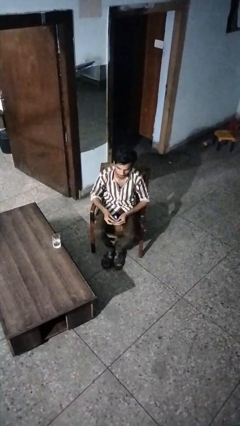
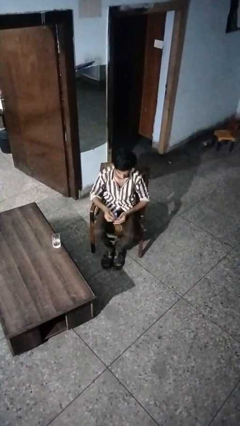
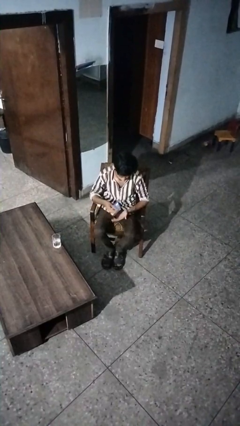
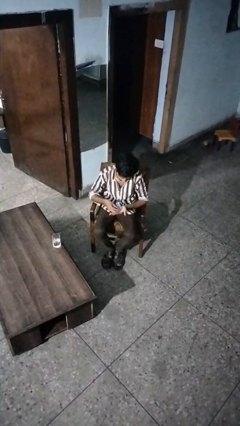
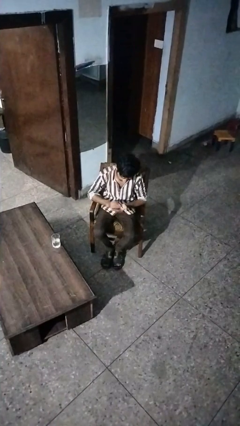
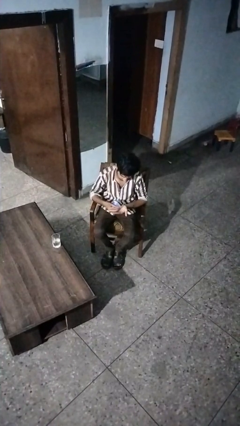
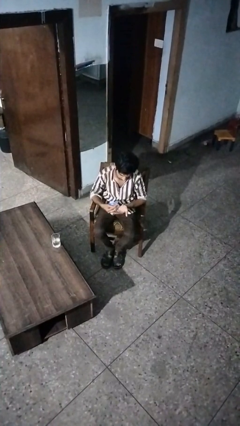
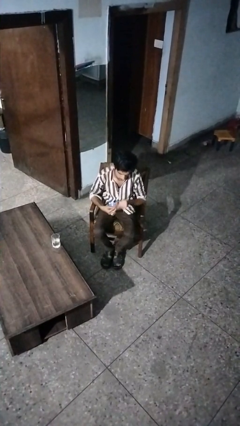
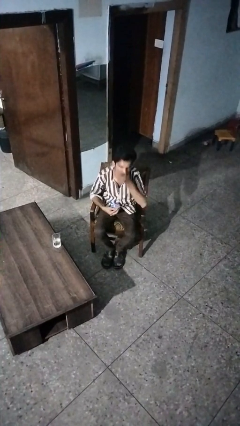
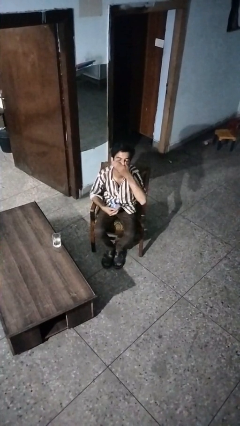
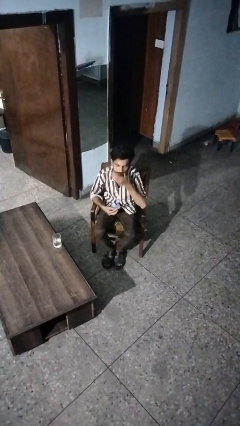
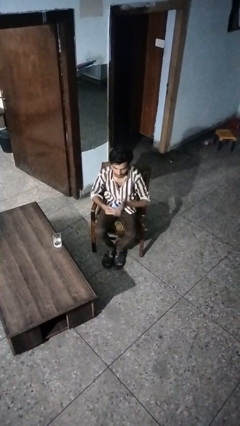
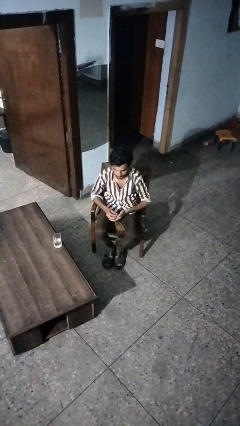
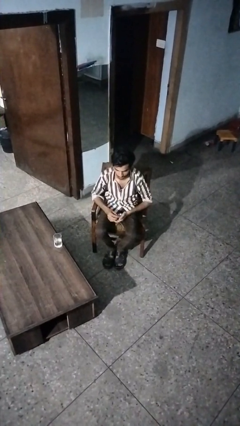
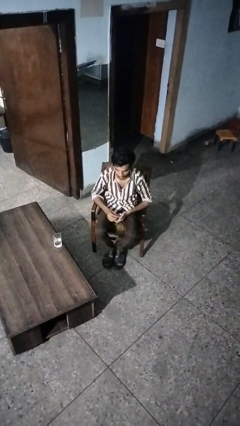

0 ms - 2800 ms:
person takes medicine pills

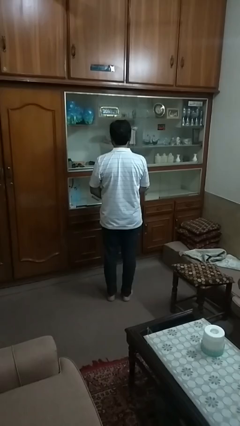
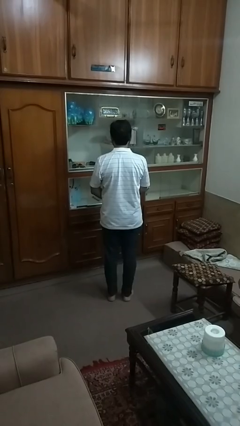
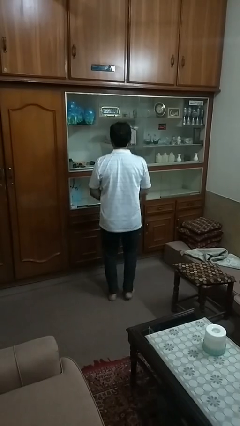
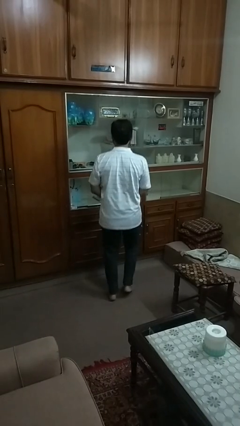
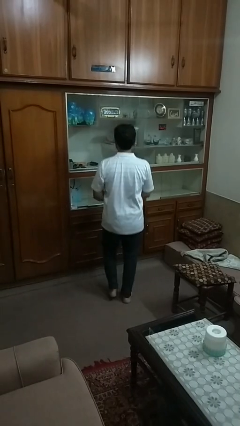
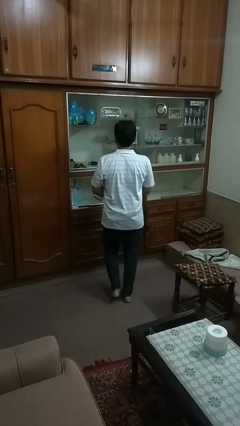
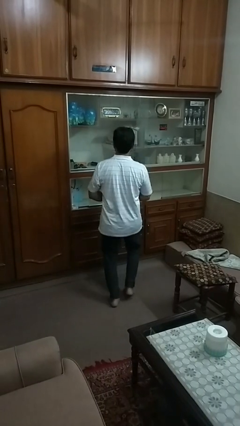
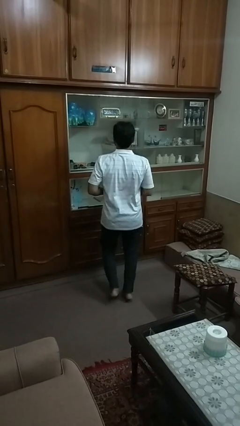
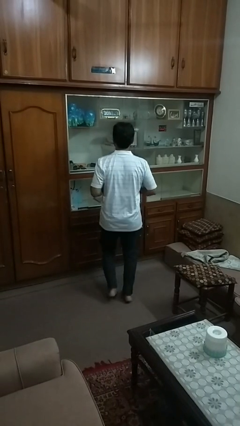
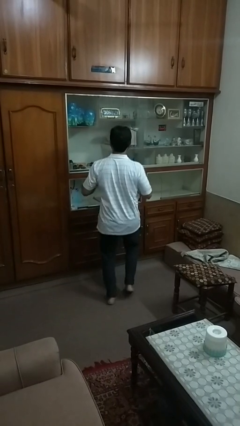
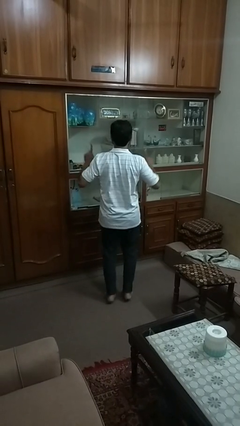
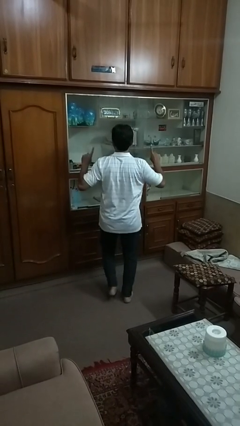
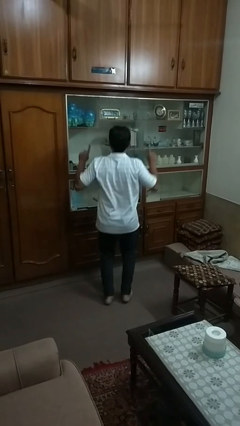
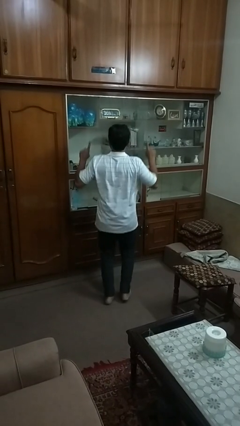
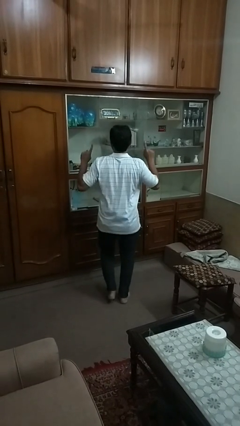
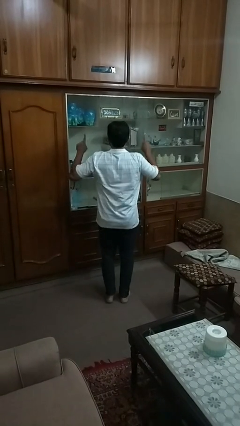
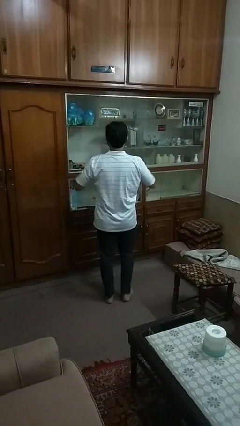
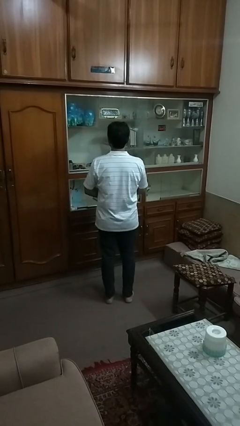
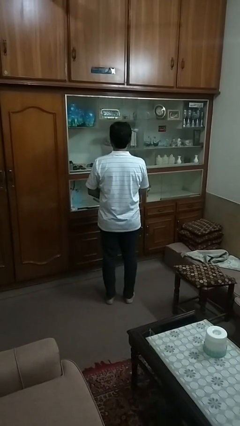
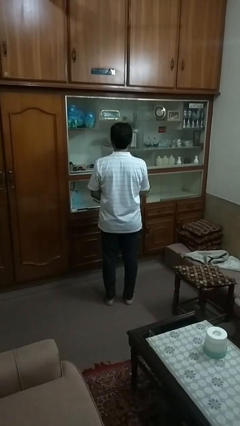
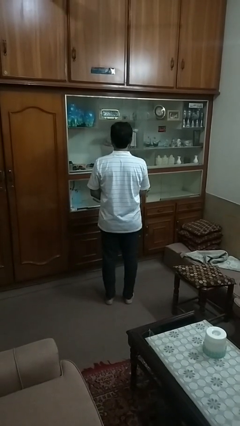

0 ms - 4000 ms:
person dances in place

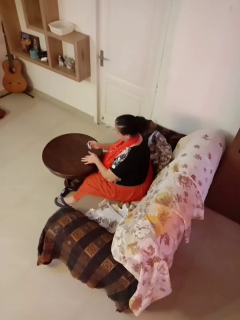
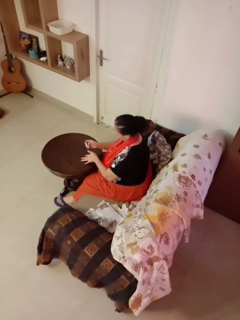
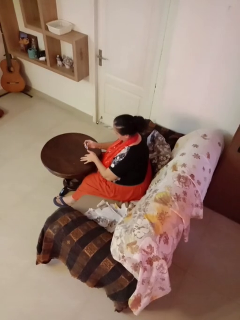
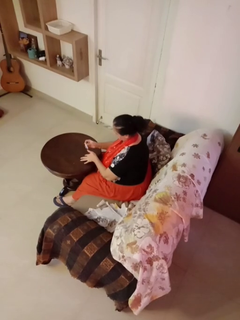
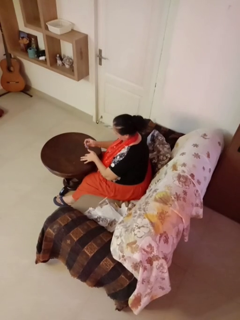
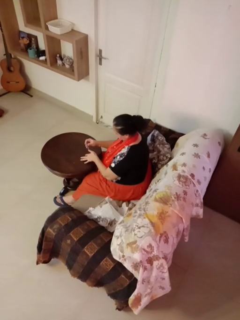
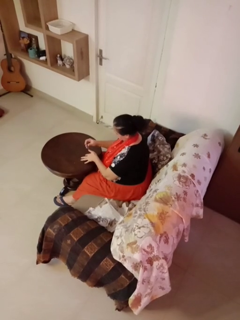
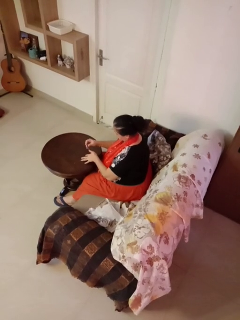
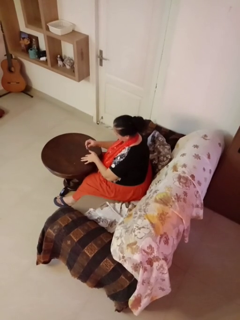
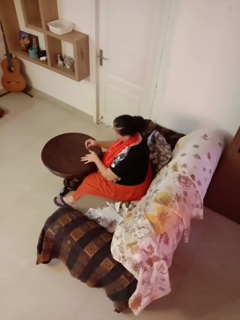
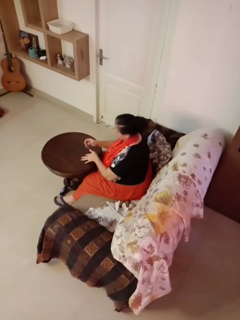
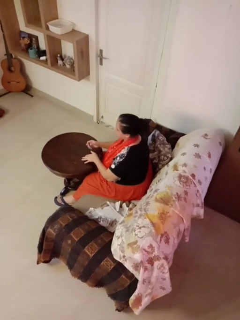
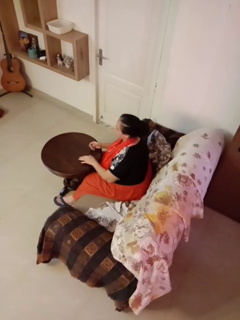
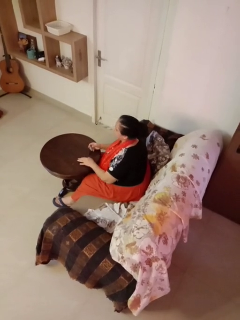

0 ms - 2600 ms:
person clips fingernails

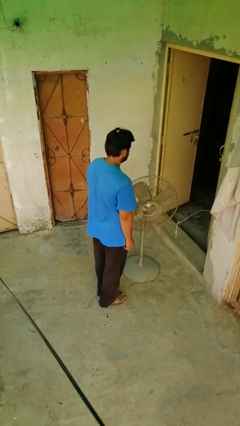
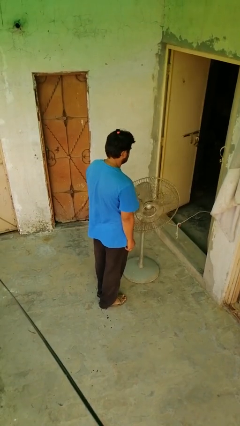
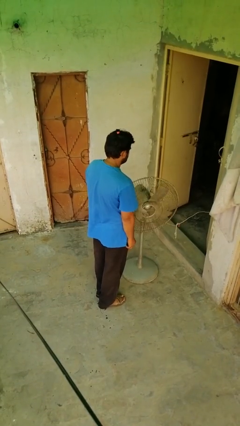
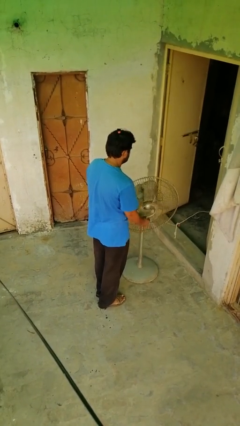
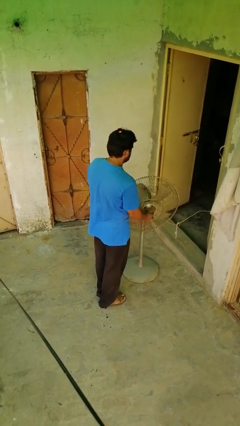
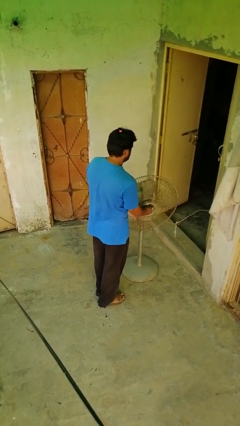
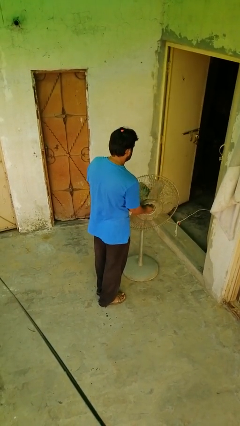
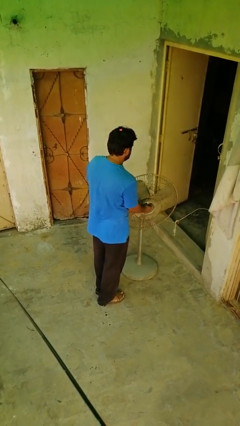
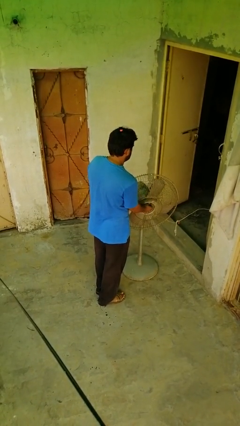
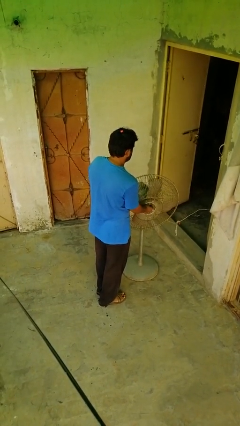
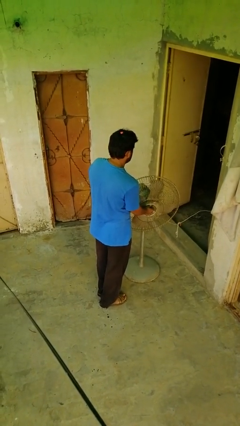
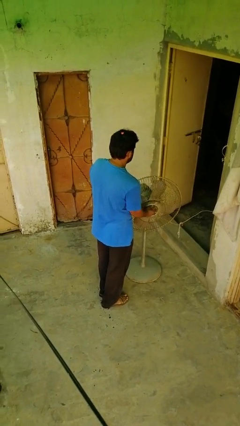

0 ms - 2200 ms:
person turns off fan

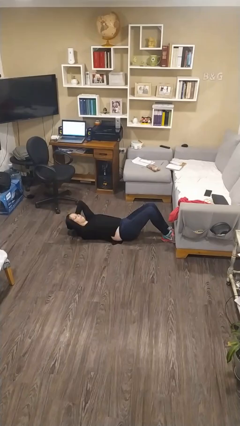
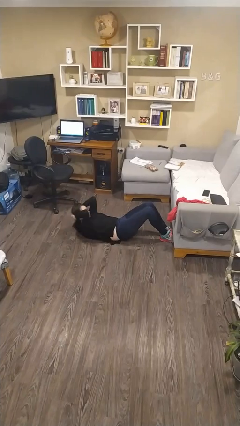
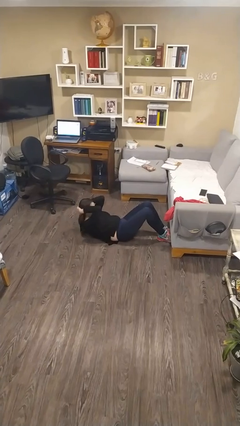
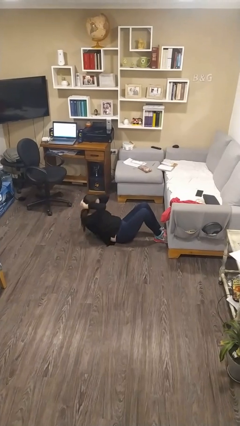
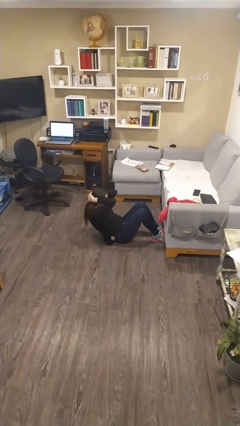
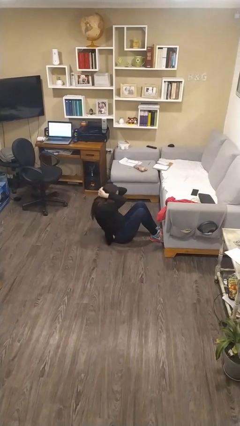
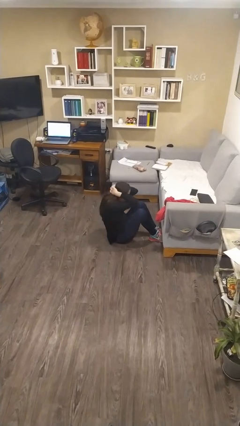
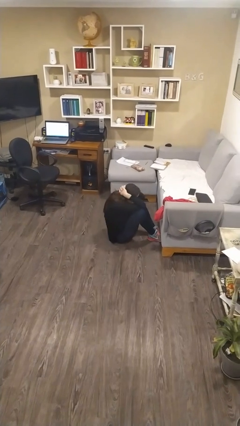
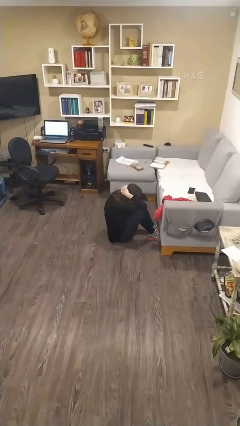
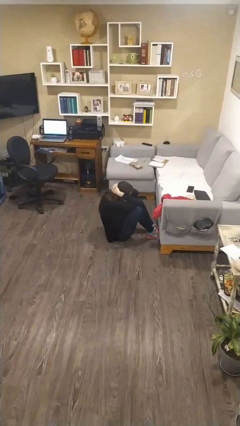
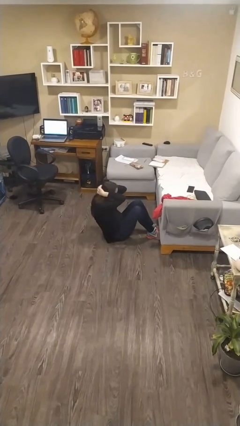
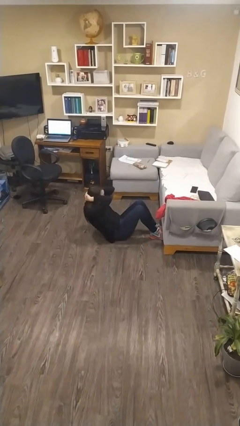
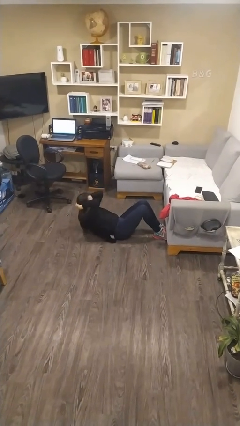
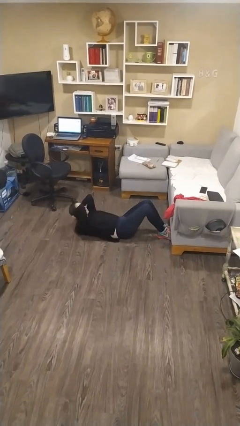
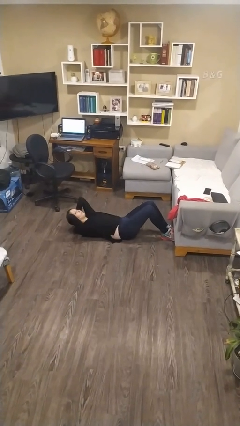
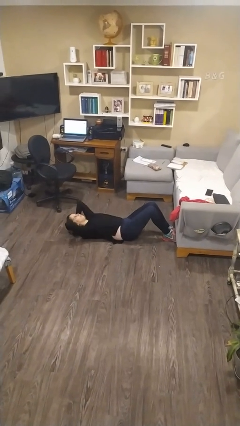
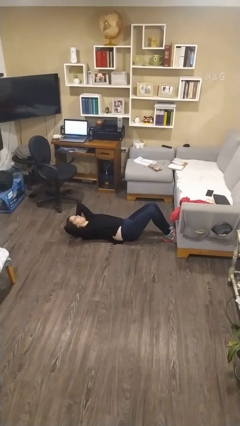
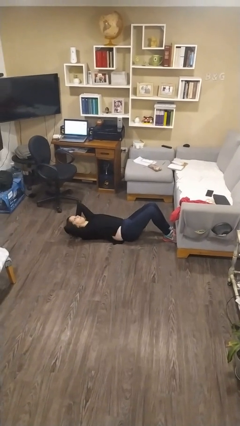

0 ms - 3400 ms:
person exercises with situp

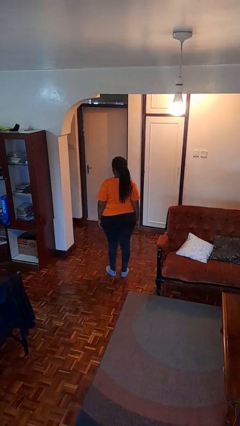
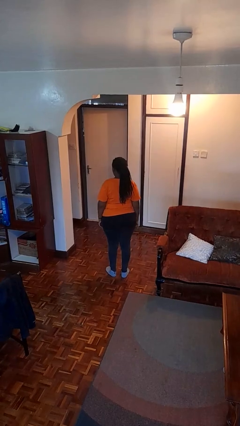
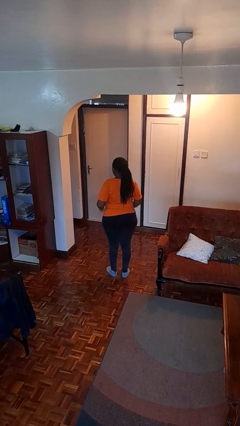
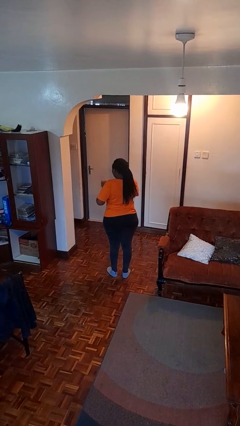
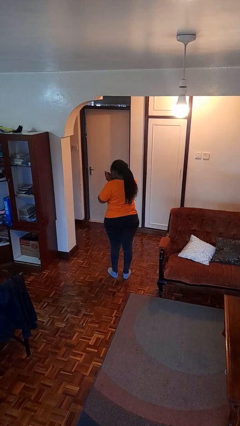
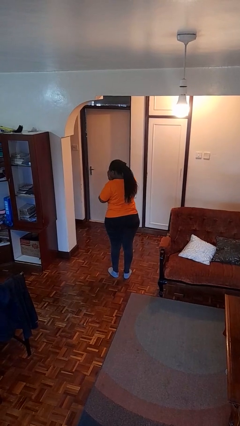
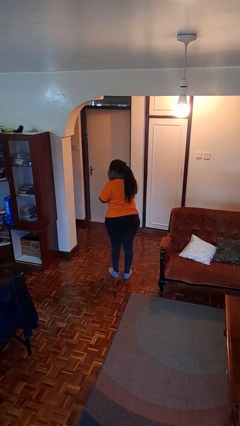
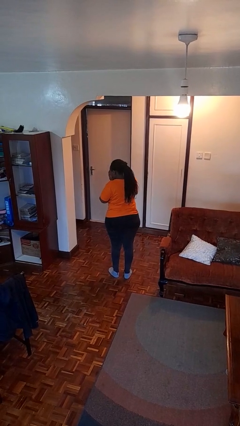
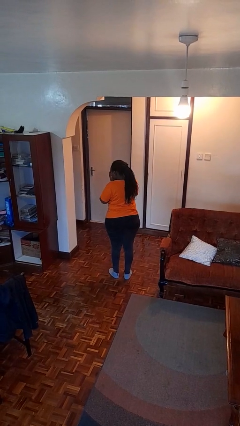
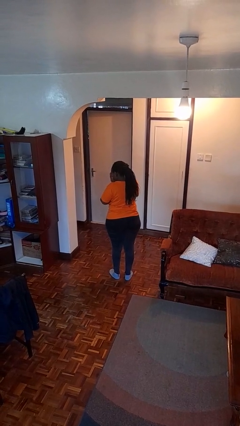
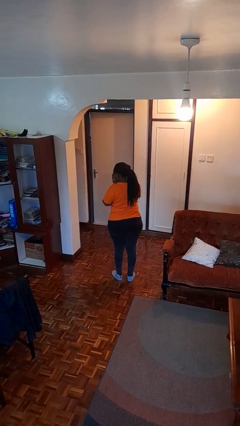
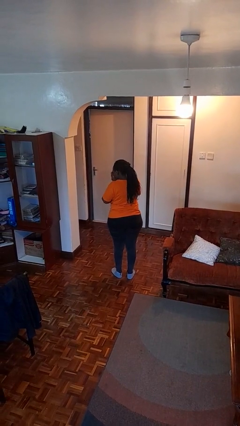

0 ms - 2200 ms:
person sneezes into hand

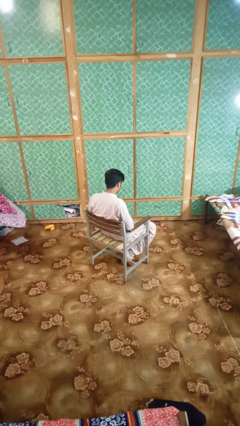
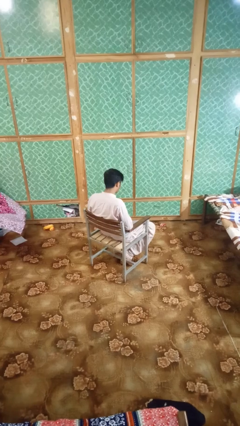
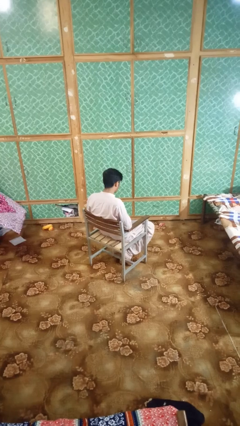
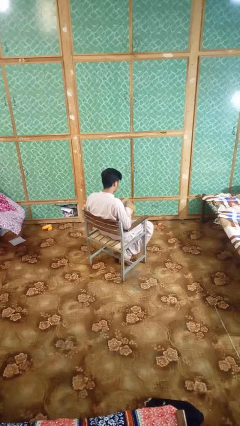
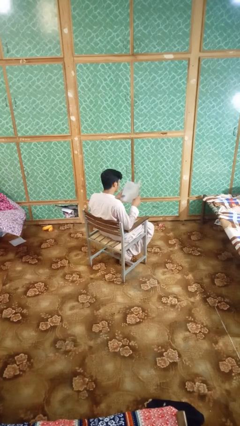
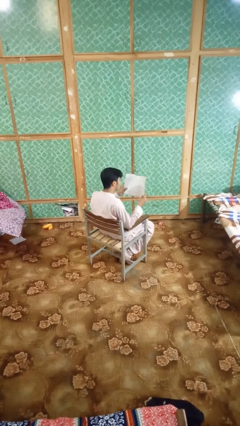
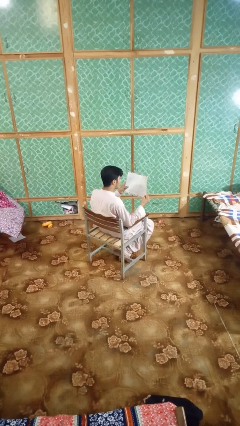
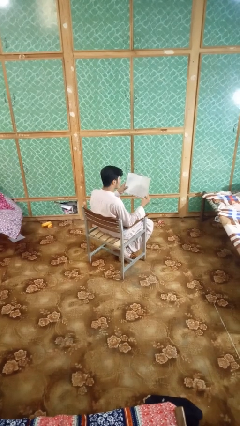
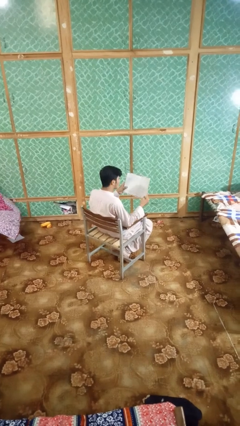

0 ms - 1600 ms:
person reads book
